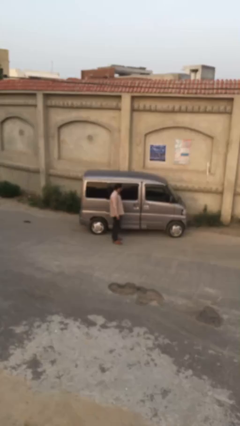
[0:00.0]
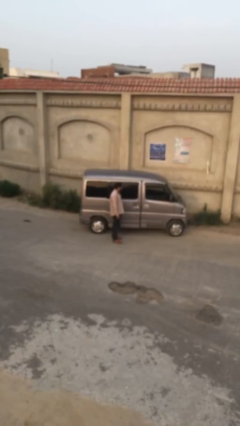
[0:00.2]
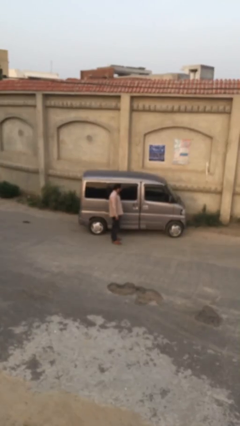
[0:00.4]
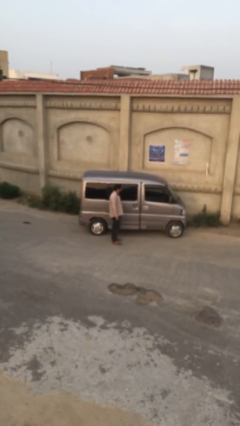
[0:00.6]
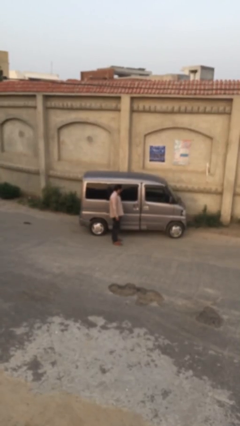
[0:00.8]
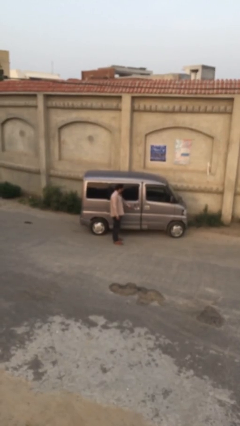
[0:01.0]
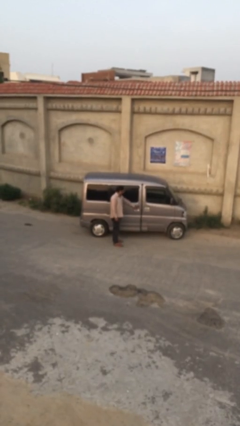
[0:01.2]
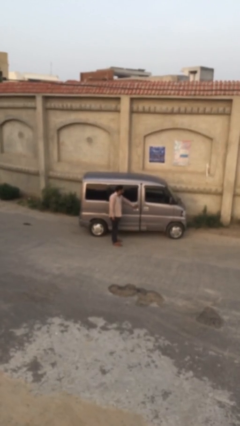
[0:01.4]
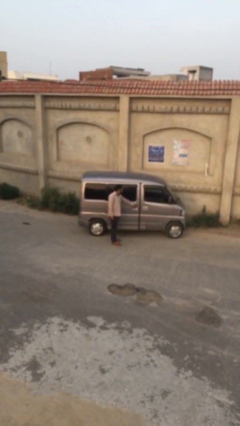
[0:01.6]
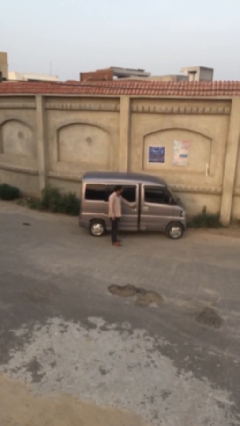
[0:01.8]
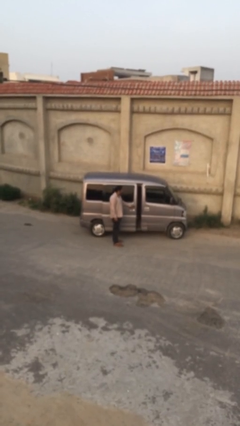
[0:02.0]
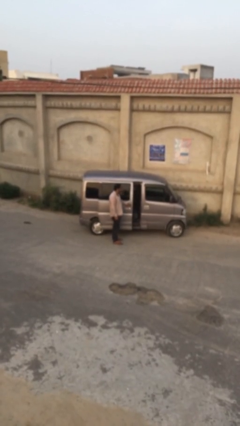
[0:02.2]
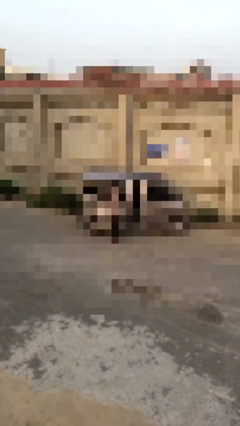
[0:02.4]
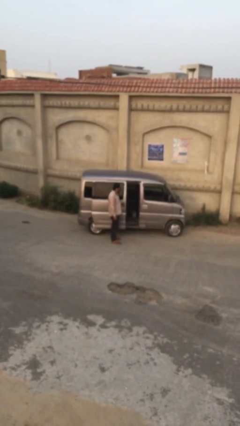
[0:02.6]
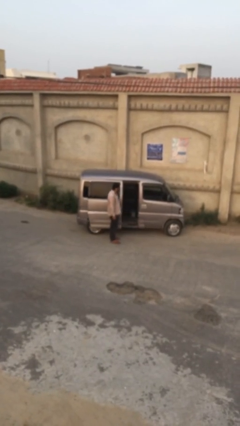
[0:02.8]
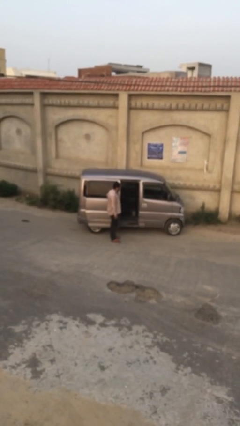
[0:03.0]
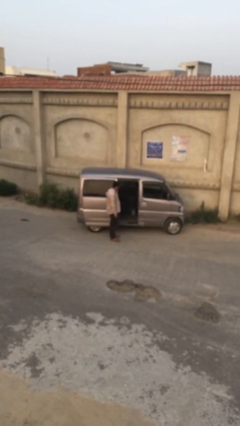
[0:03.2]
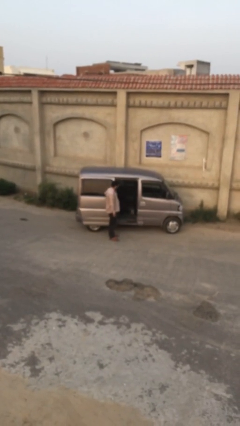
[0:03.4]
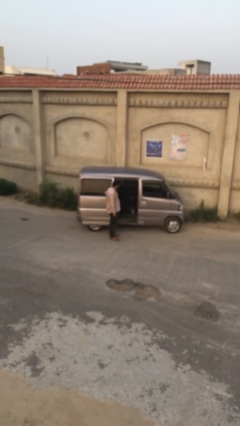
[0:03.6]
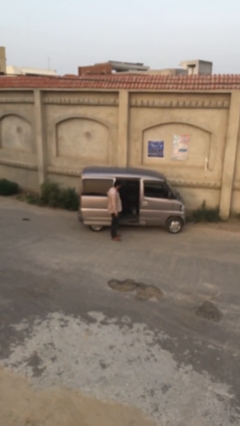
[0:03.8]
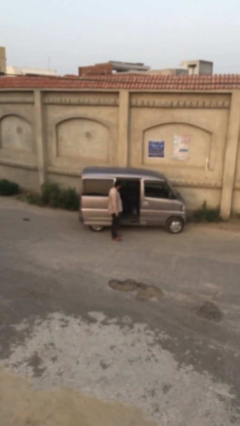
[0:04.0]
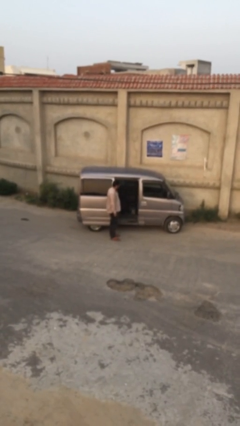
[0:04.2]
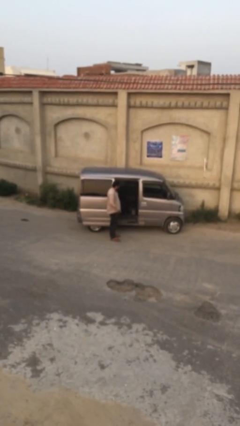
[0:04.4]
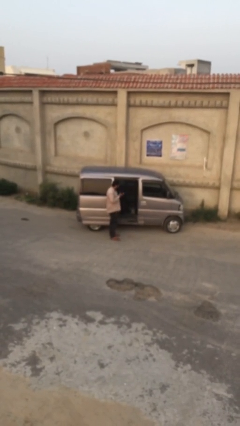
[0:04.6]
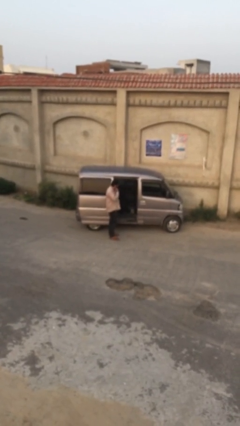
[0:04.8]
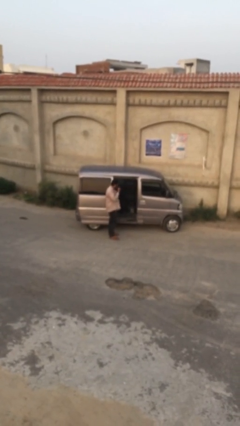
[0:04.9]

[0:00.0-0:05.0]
person opens car door

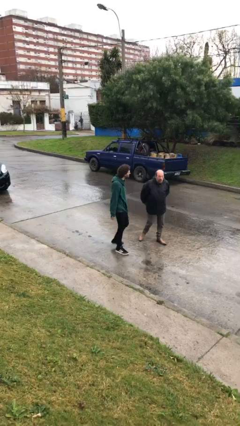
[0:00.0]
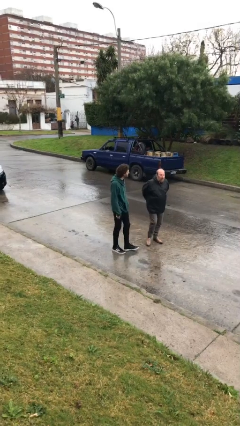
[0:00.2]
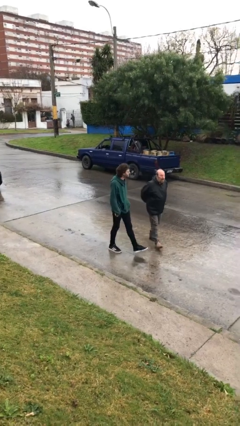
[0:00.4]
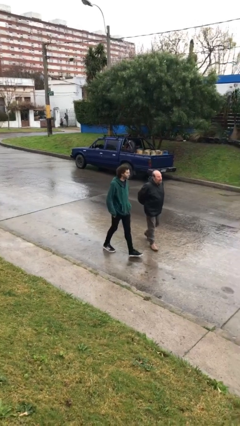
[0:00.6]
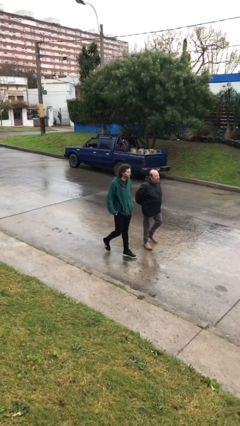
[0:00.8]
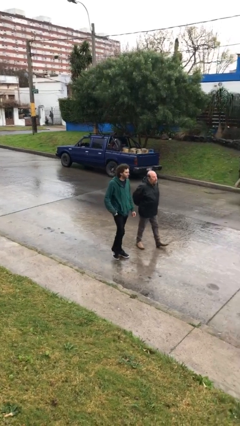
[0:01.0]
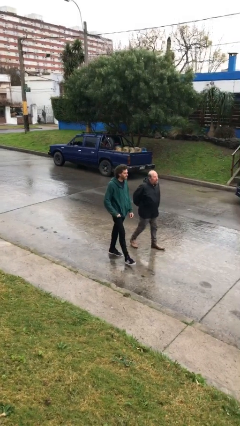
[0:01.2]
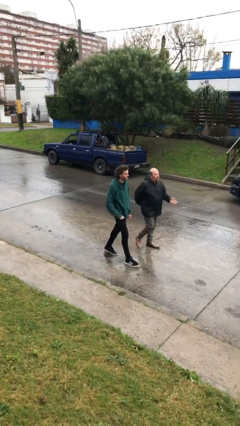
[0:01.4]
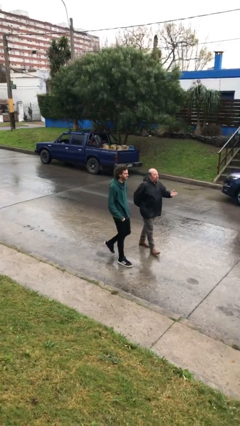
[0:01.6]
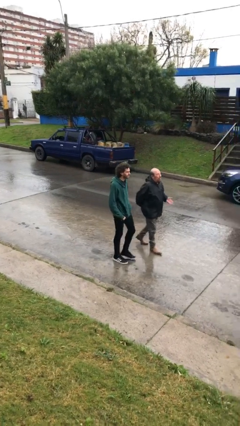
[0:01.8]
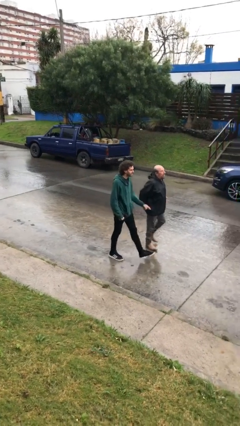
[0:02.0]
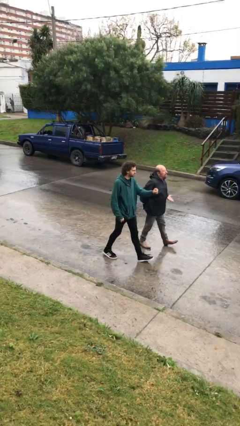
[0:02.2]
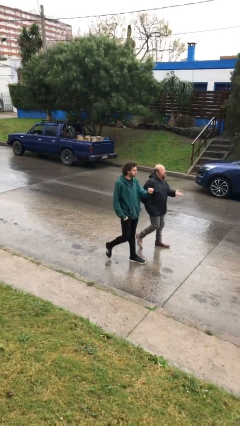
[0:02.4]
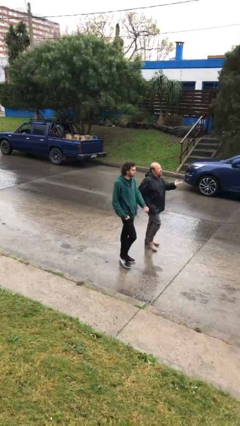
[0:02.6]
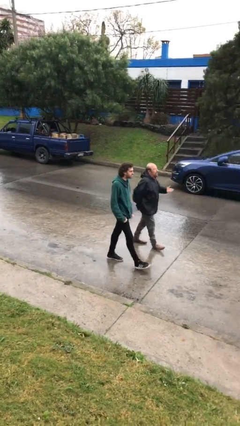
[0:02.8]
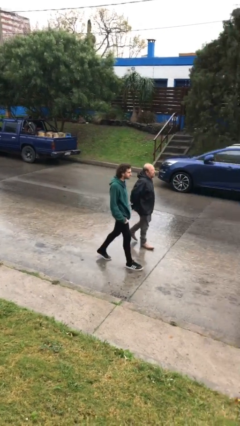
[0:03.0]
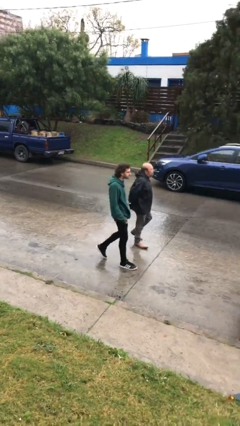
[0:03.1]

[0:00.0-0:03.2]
person talks to person

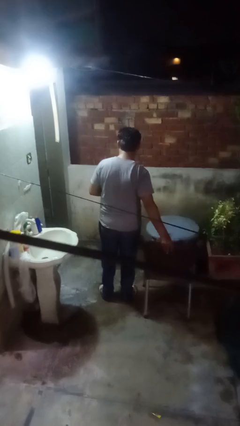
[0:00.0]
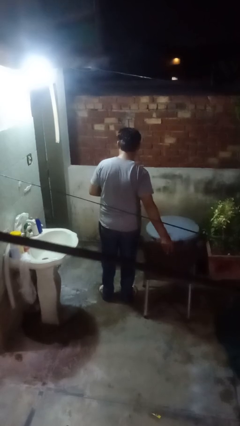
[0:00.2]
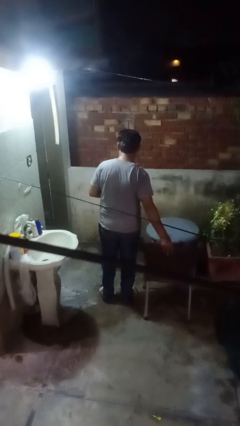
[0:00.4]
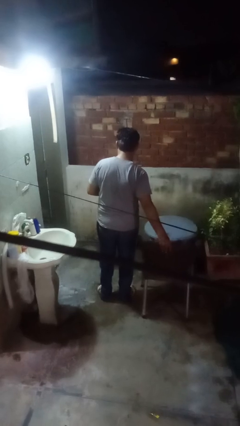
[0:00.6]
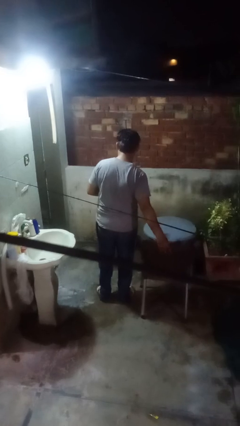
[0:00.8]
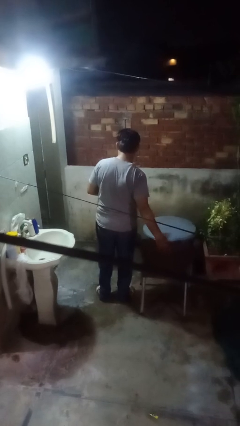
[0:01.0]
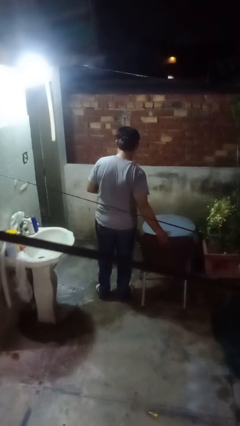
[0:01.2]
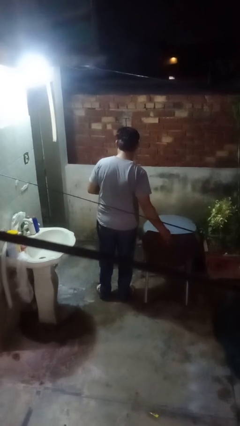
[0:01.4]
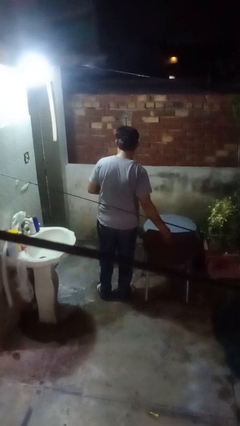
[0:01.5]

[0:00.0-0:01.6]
person pushes in chair

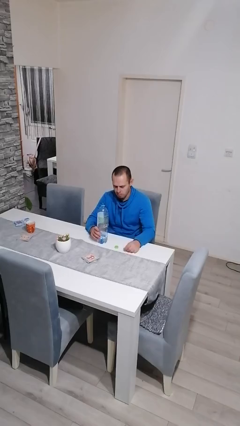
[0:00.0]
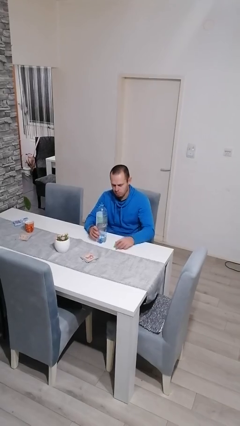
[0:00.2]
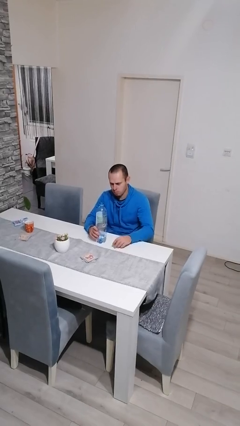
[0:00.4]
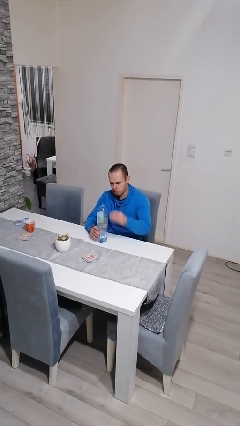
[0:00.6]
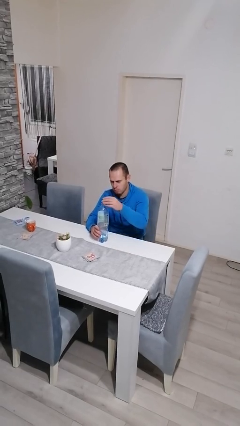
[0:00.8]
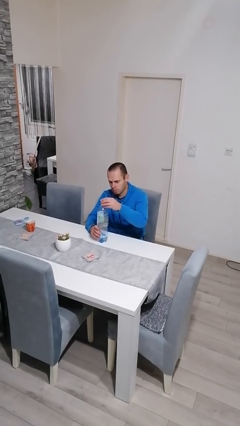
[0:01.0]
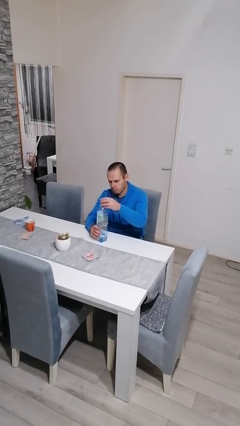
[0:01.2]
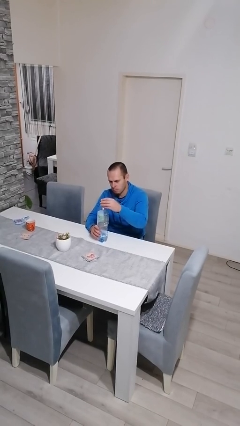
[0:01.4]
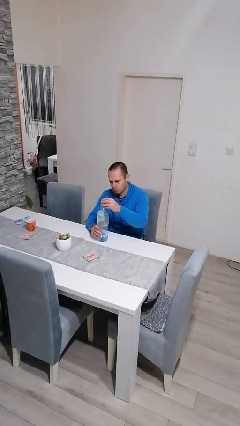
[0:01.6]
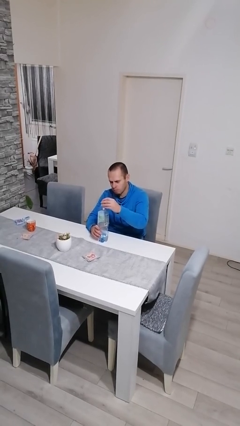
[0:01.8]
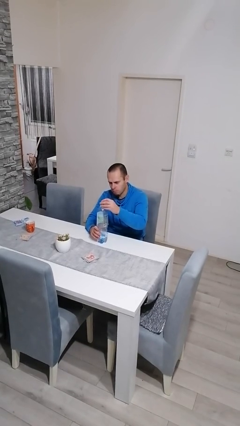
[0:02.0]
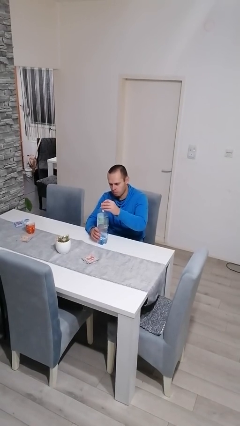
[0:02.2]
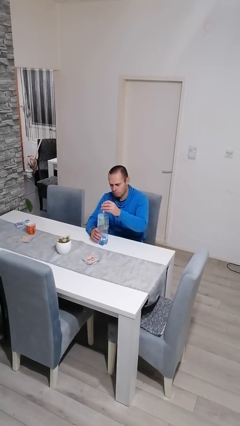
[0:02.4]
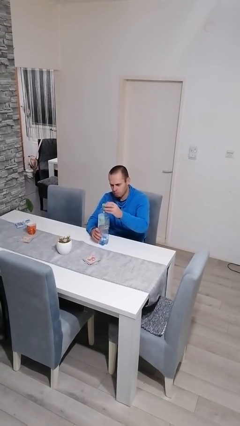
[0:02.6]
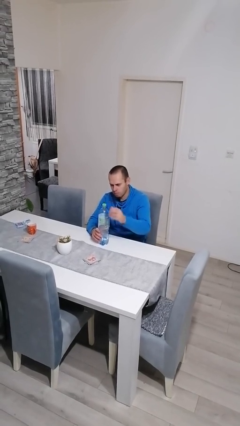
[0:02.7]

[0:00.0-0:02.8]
person screws lid to bottle

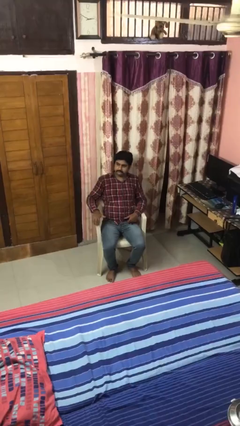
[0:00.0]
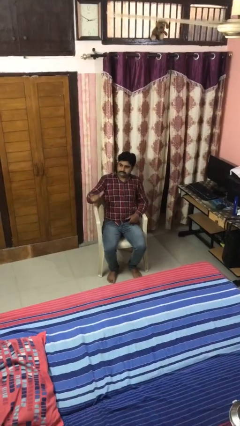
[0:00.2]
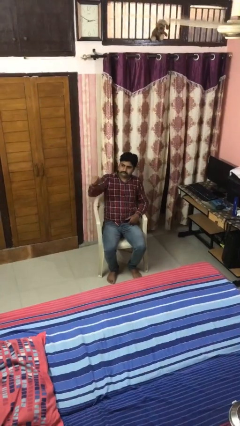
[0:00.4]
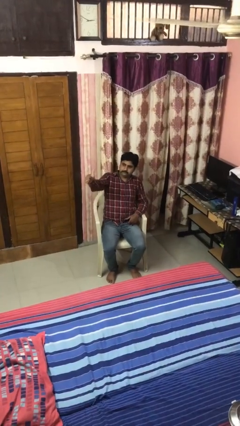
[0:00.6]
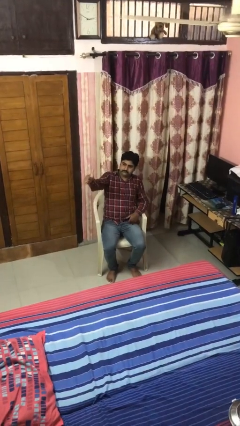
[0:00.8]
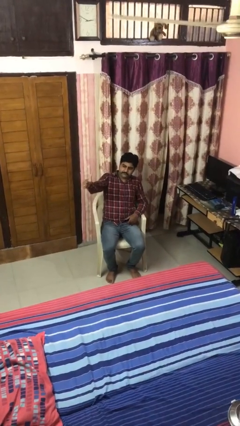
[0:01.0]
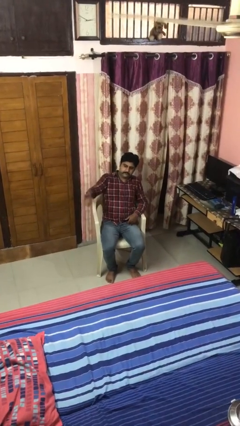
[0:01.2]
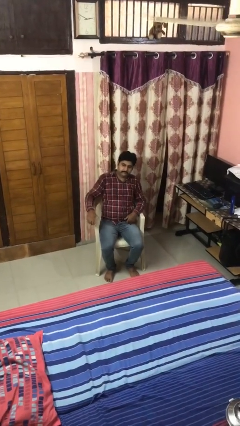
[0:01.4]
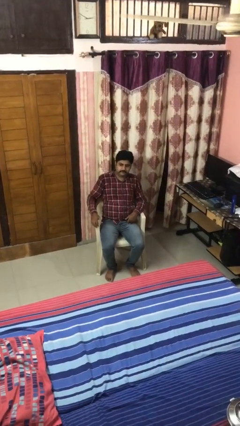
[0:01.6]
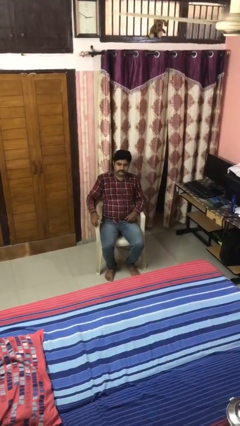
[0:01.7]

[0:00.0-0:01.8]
person gestures thumbs up

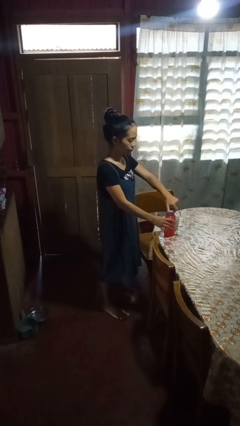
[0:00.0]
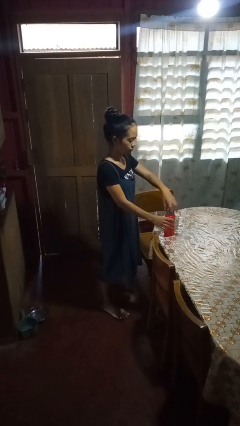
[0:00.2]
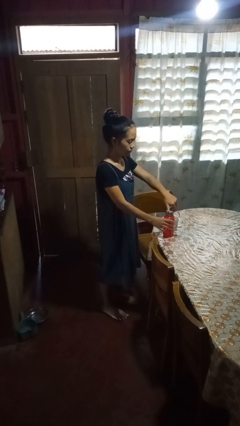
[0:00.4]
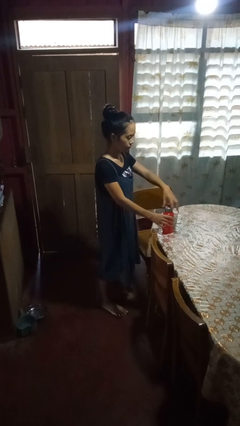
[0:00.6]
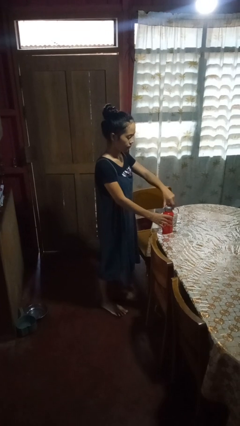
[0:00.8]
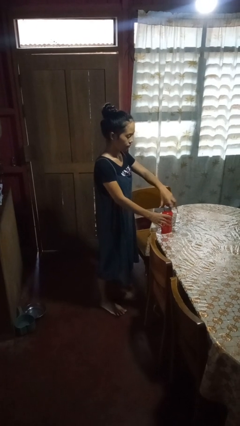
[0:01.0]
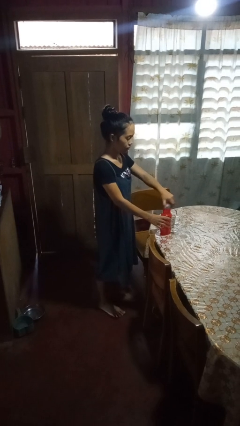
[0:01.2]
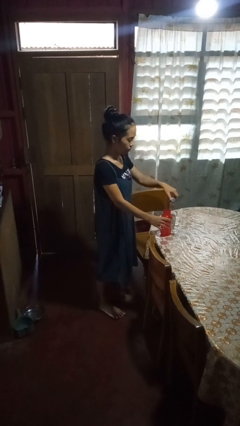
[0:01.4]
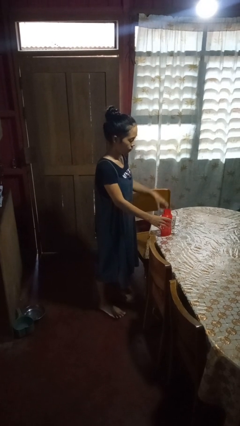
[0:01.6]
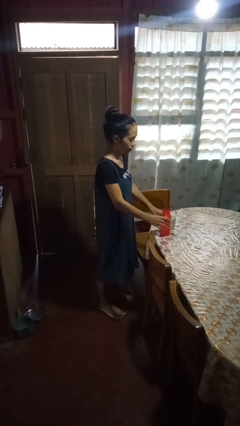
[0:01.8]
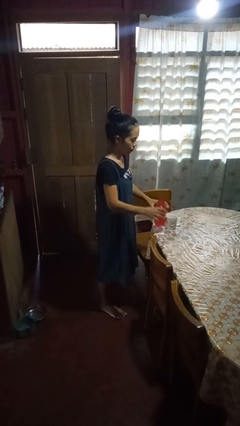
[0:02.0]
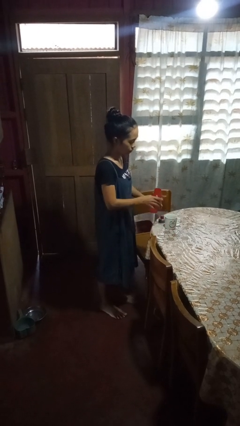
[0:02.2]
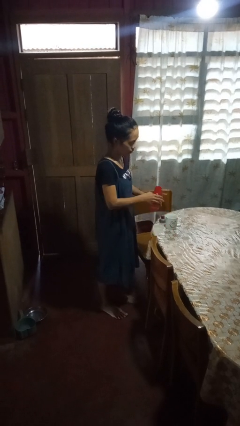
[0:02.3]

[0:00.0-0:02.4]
person unscrews lid from bottle

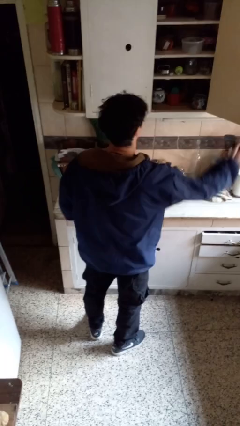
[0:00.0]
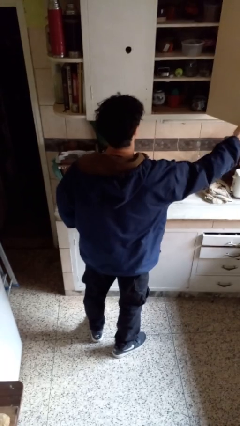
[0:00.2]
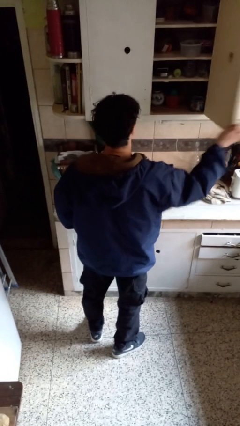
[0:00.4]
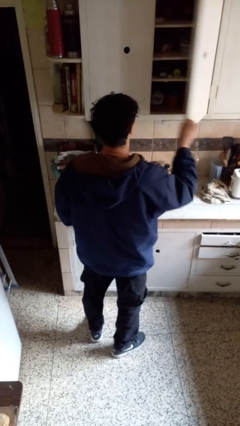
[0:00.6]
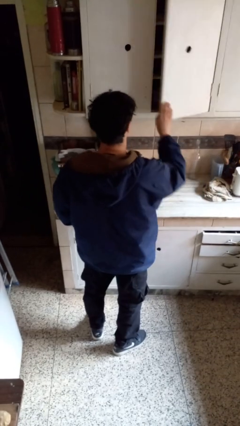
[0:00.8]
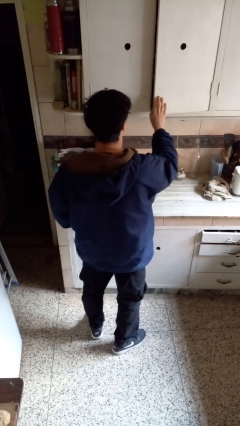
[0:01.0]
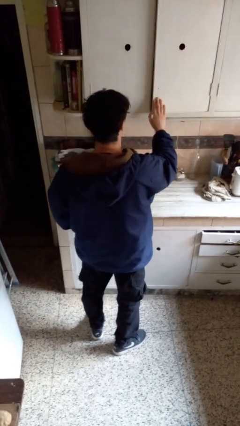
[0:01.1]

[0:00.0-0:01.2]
person closes cabinet
